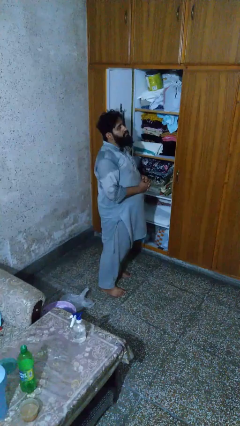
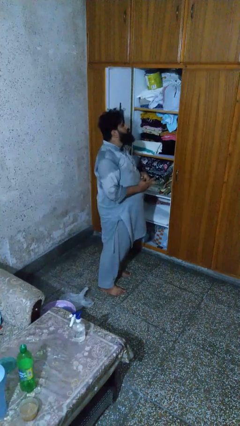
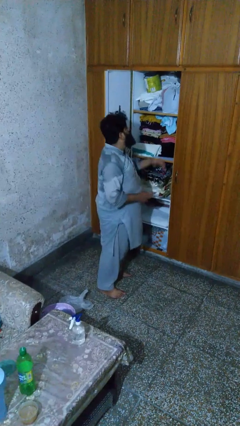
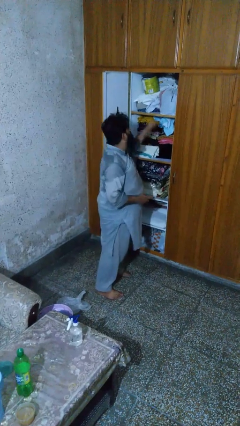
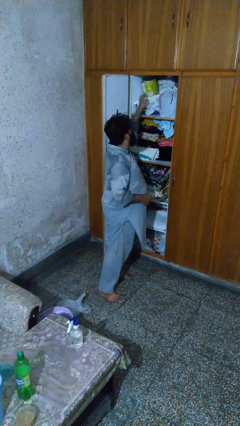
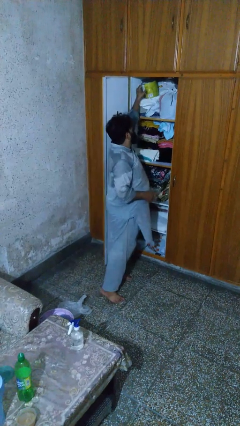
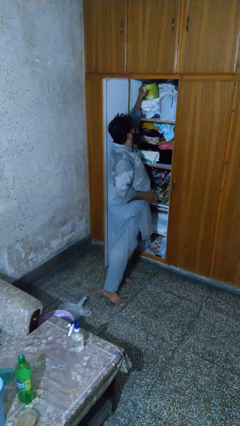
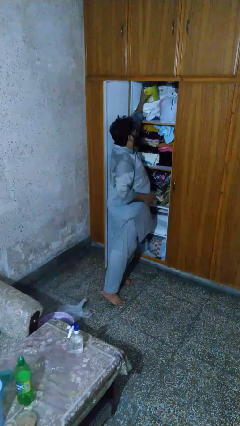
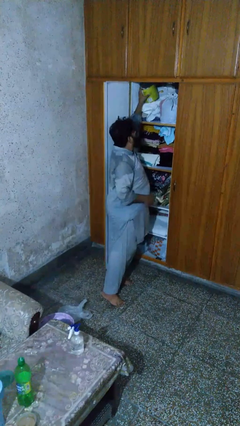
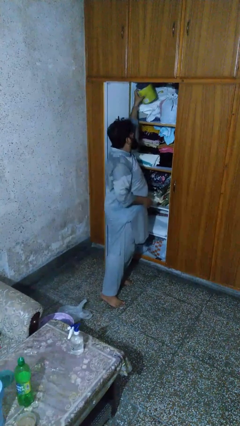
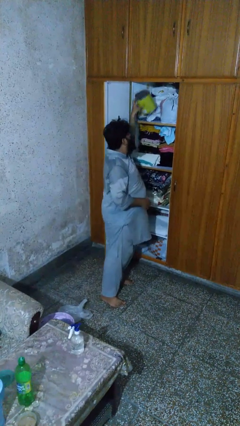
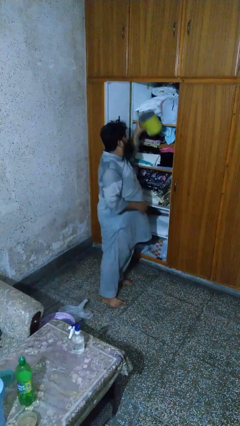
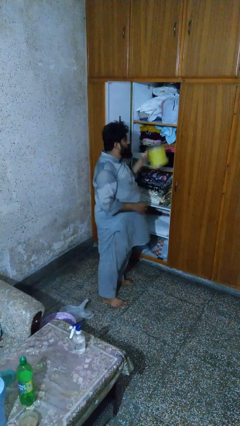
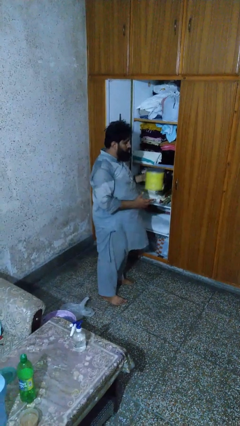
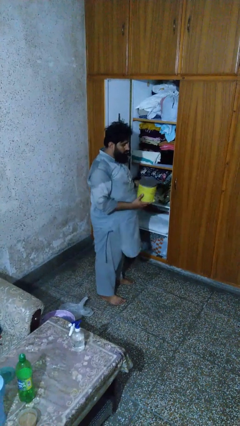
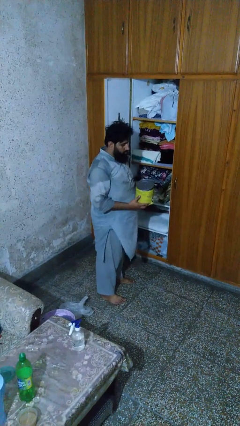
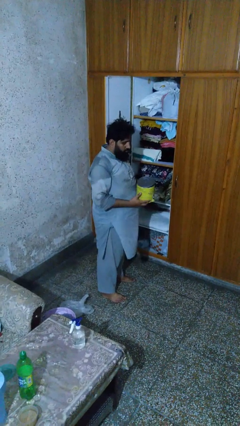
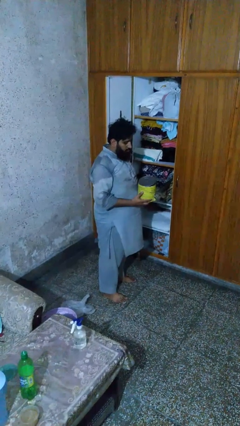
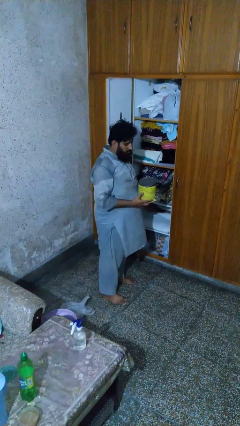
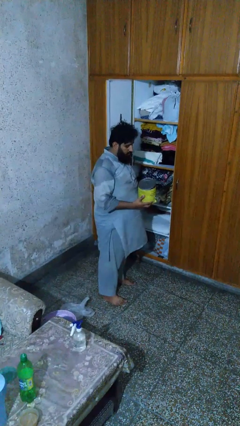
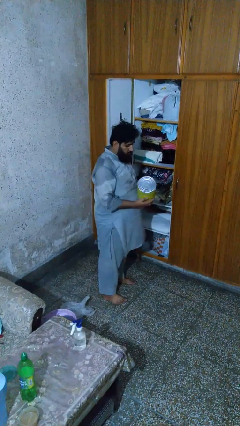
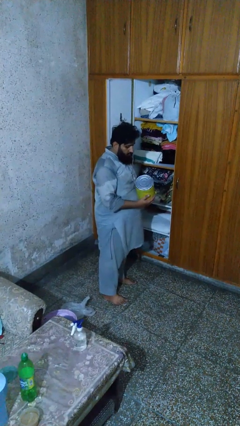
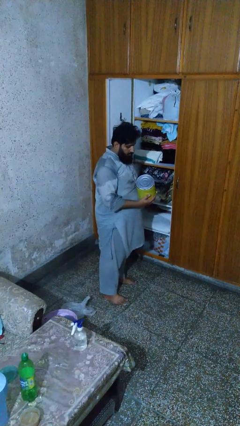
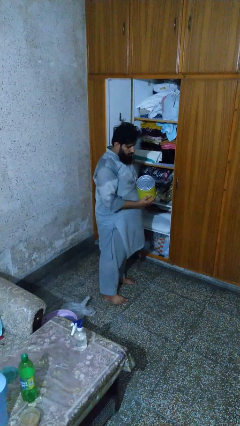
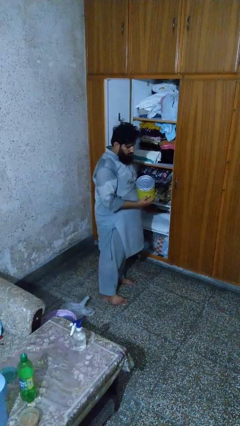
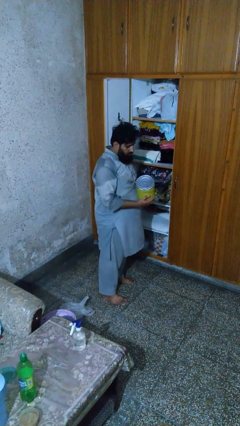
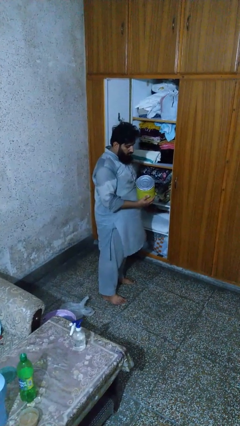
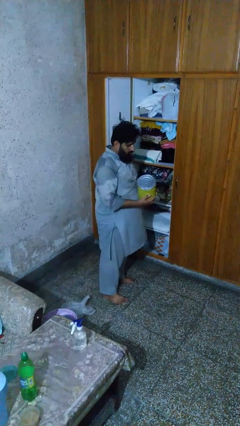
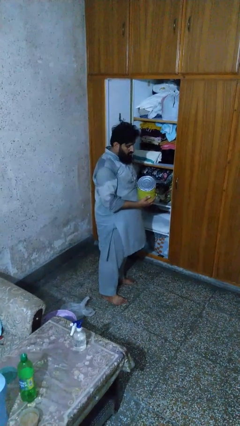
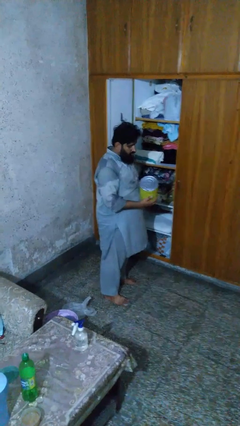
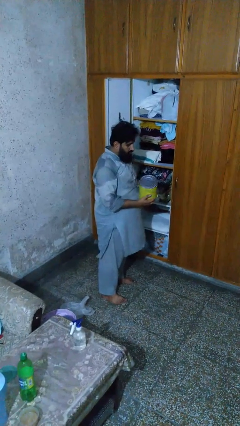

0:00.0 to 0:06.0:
person picks up object from shelf

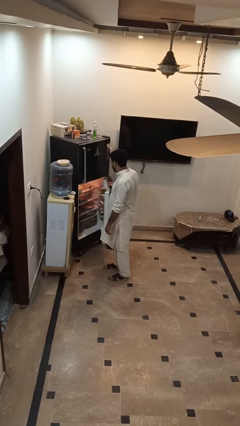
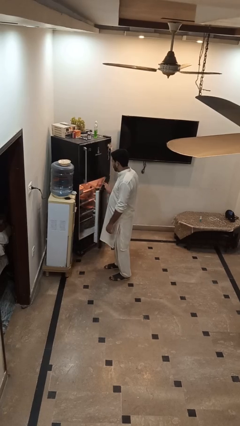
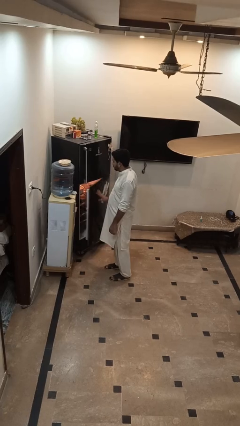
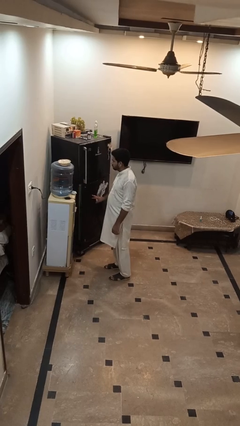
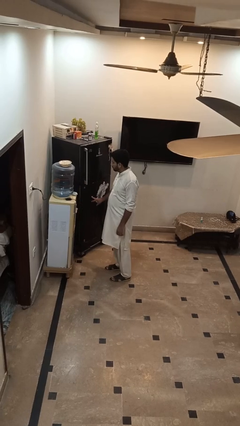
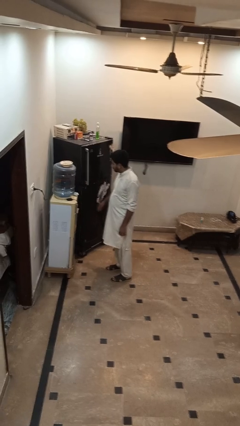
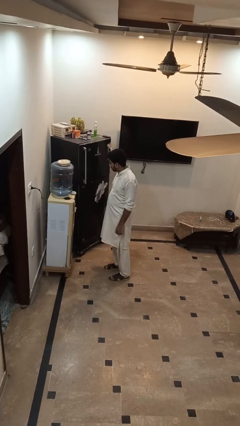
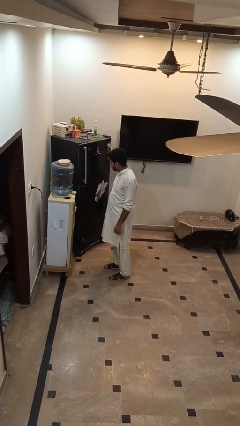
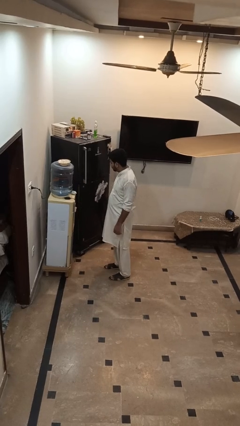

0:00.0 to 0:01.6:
person closes refrigerator

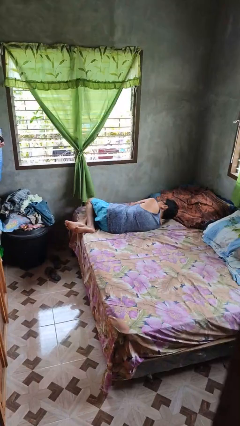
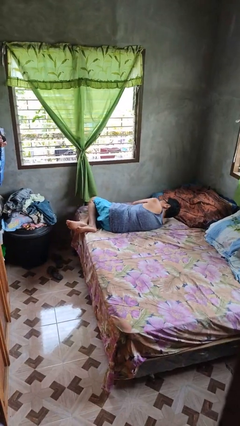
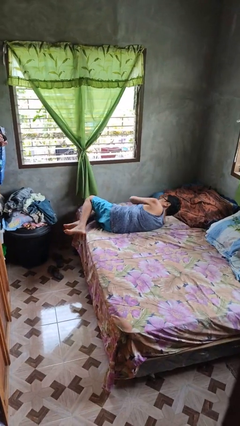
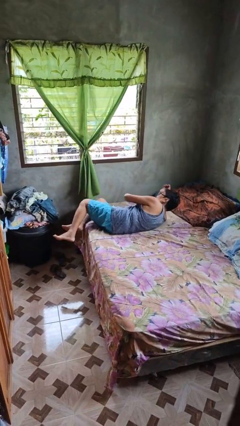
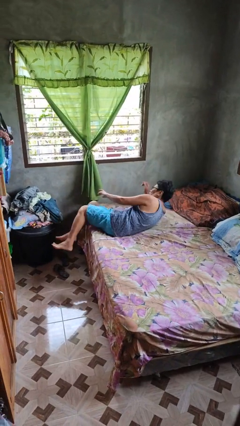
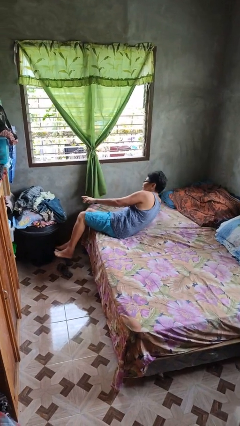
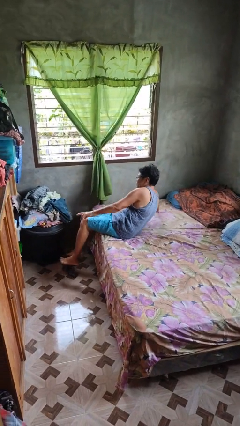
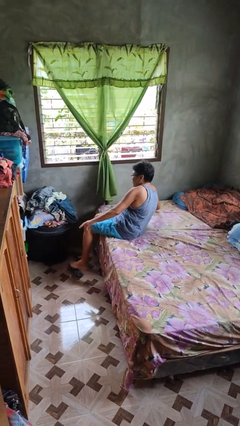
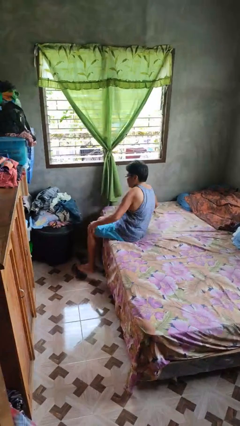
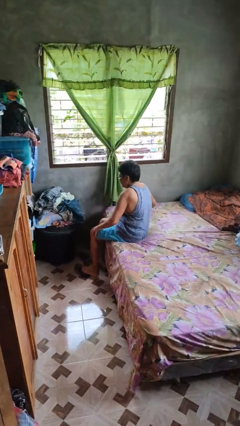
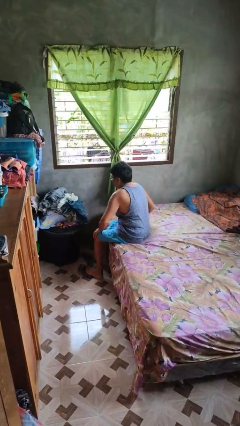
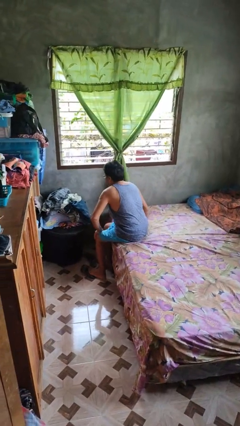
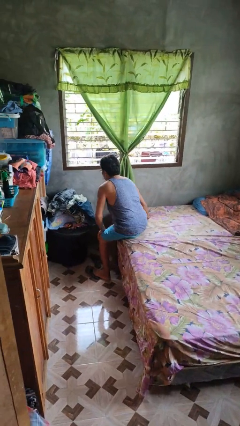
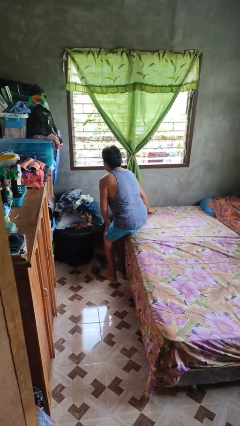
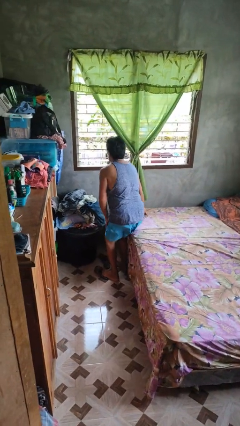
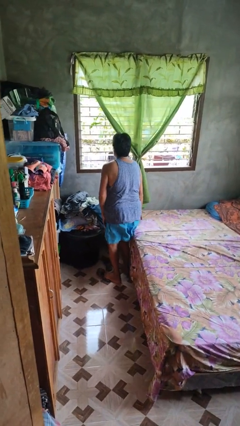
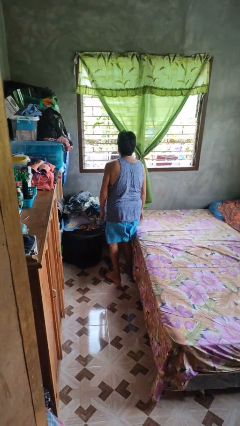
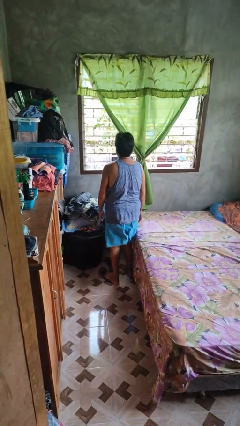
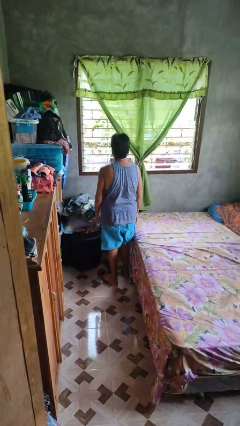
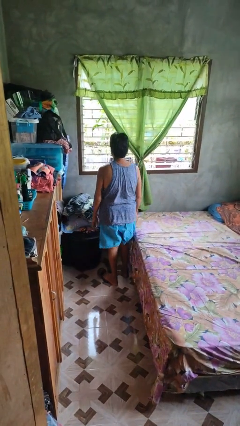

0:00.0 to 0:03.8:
person stands up

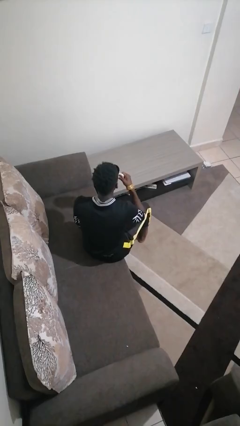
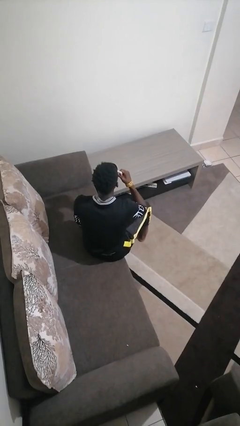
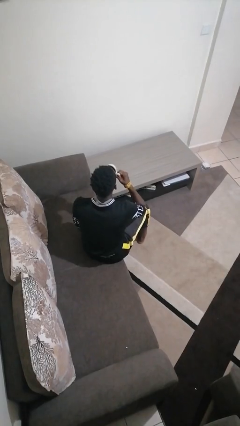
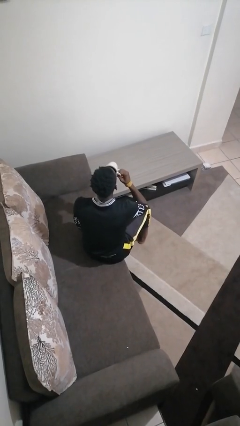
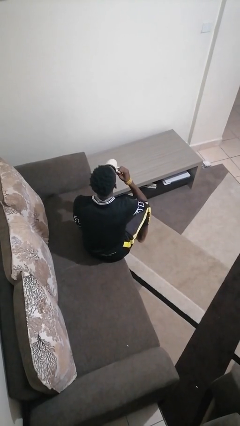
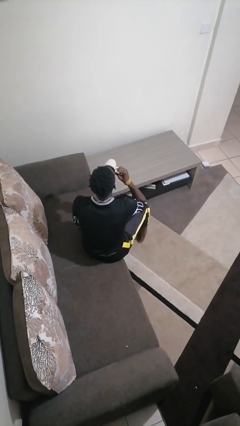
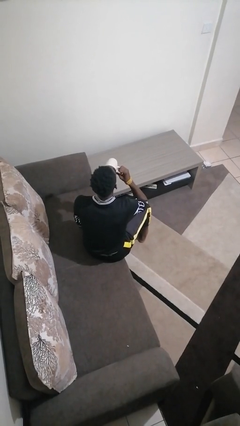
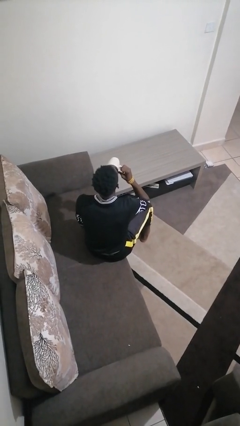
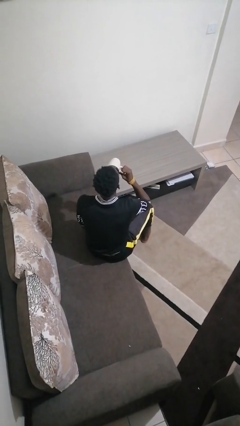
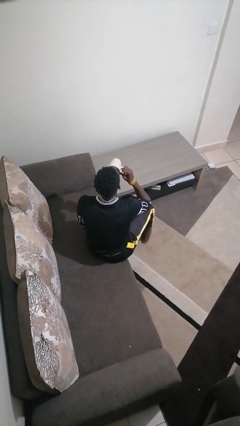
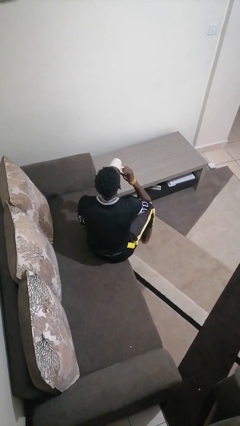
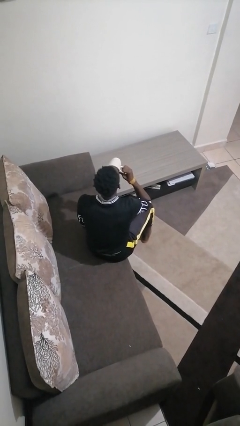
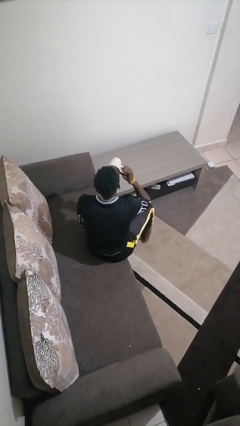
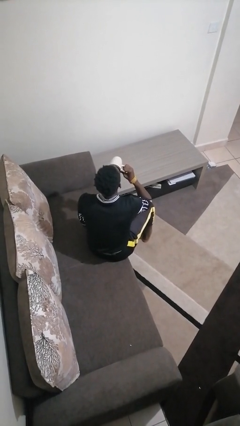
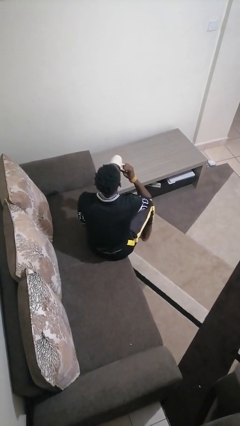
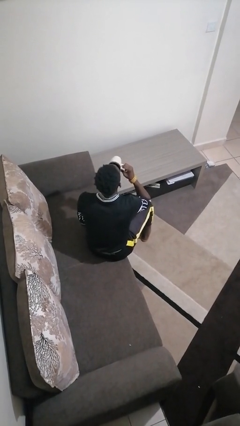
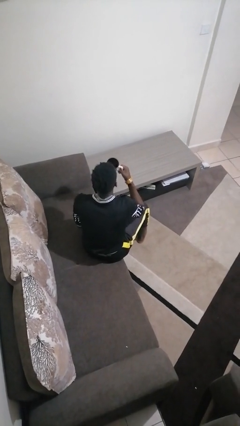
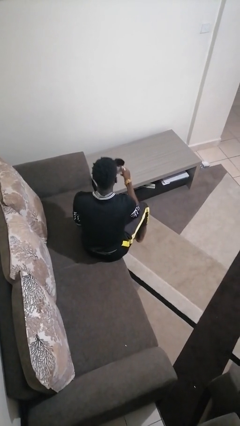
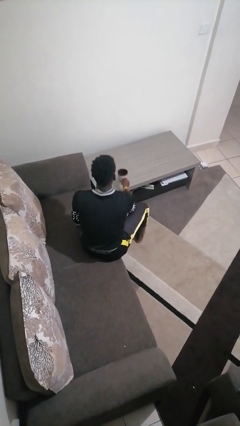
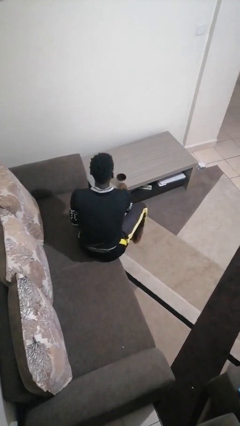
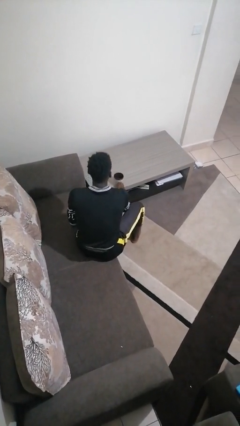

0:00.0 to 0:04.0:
person drinks from mug

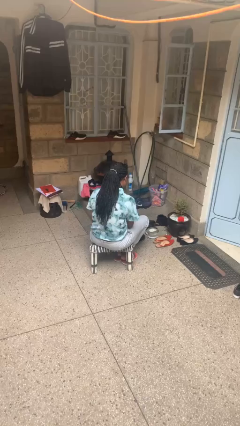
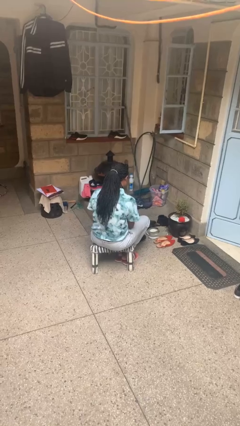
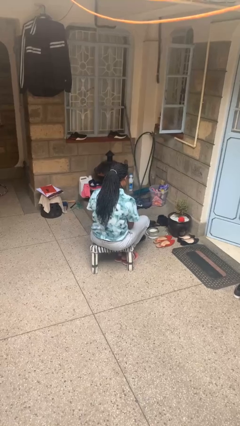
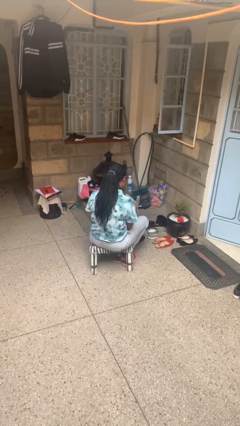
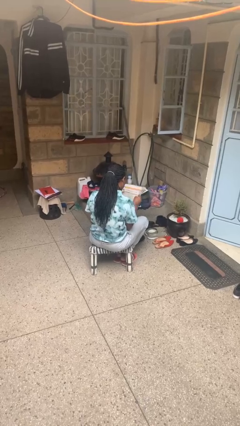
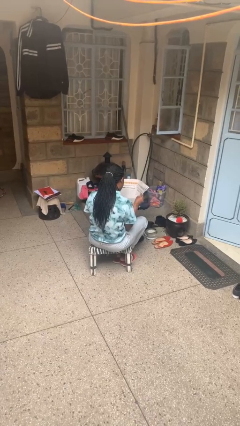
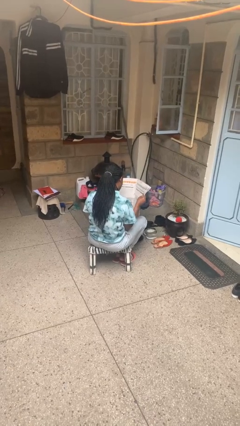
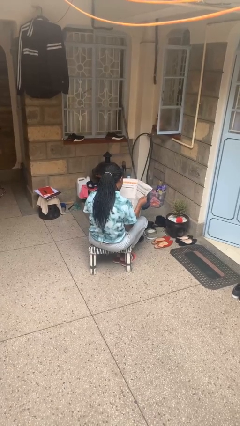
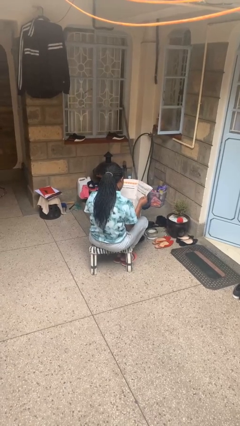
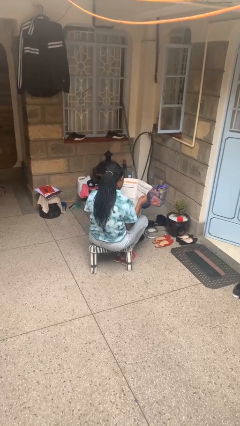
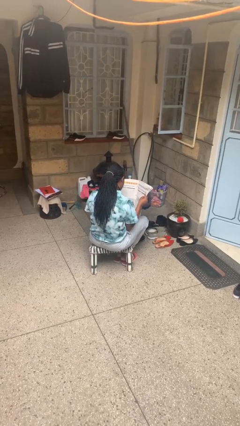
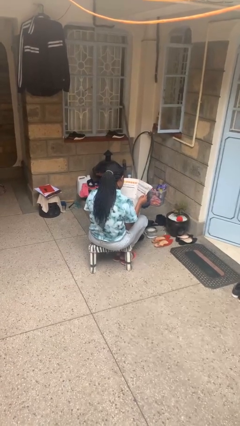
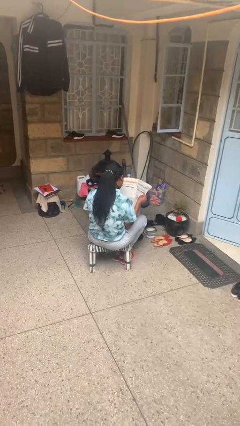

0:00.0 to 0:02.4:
person reads newspaper
